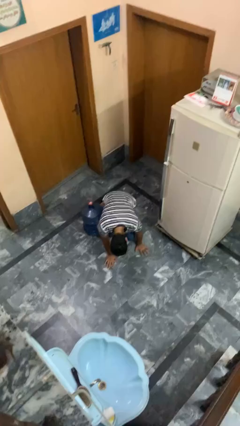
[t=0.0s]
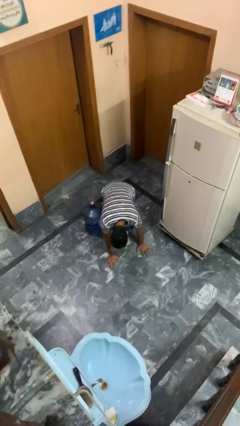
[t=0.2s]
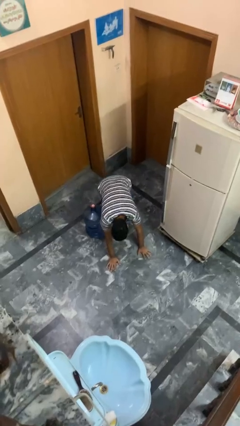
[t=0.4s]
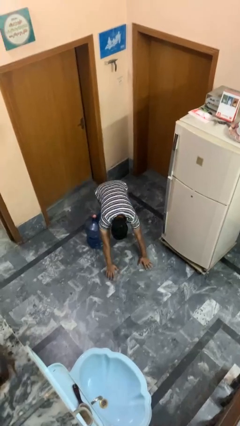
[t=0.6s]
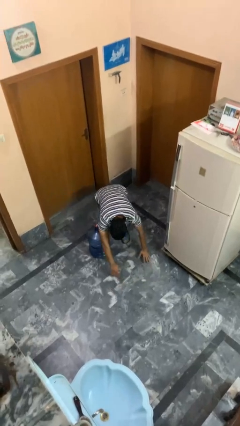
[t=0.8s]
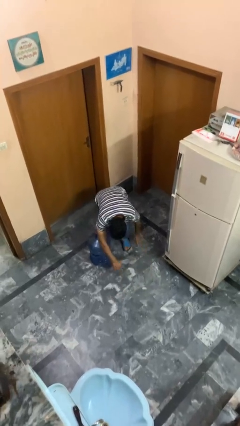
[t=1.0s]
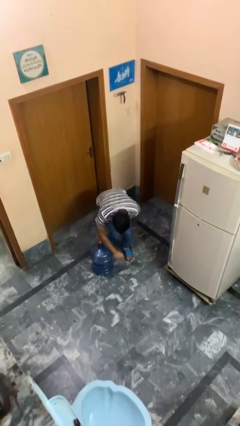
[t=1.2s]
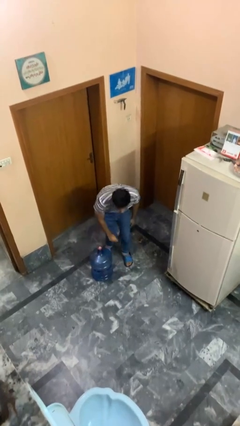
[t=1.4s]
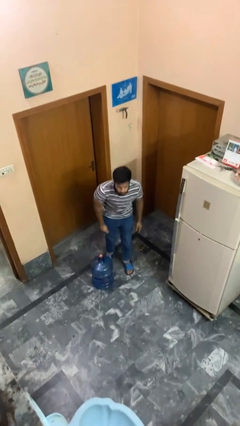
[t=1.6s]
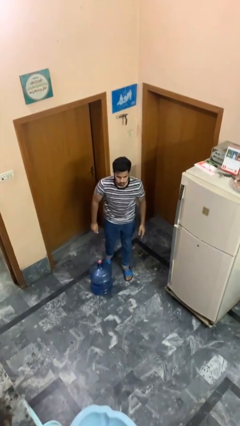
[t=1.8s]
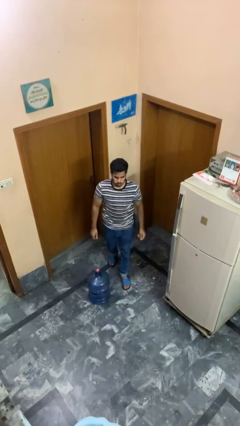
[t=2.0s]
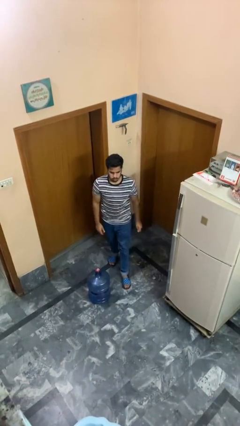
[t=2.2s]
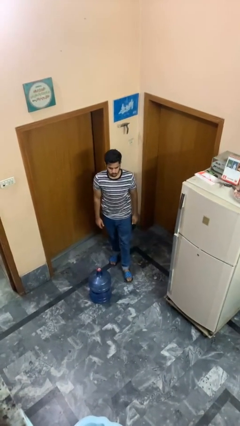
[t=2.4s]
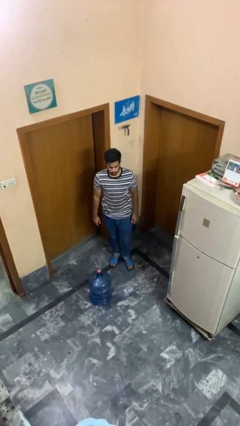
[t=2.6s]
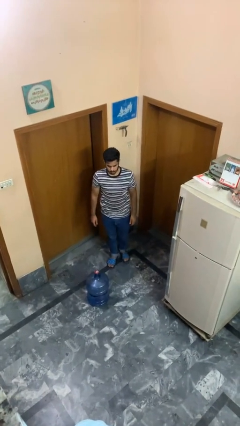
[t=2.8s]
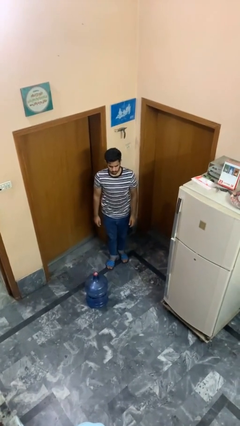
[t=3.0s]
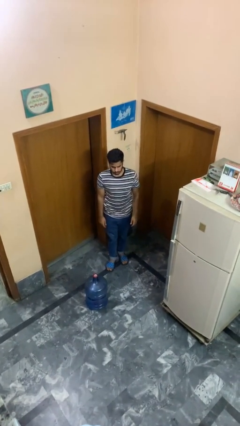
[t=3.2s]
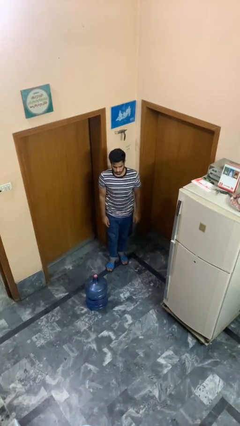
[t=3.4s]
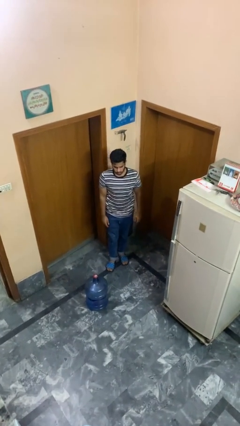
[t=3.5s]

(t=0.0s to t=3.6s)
person stands up from floor

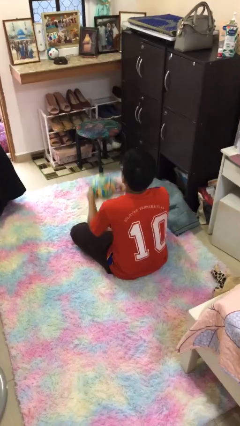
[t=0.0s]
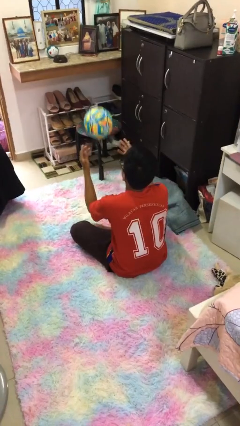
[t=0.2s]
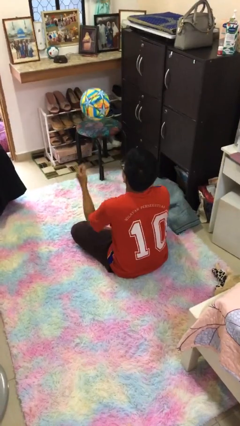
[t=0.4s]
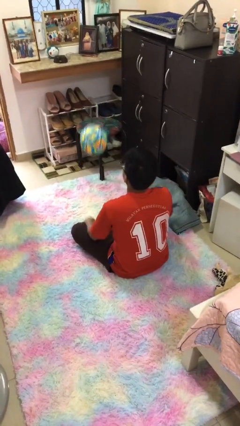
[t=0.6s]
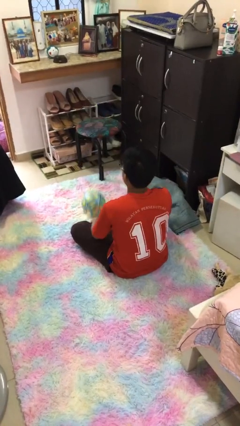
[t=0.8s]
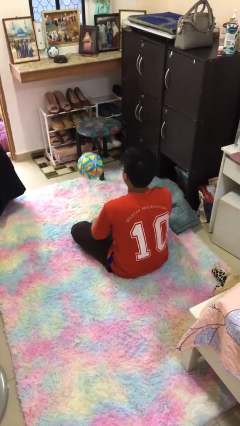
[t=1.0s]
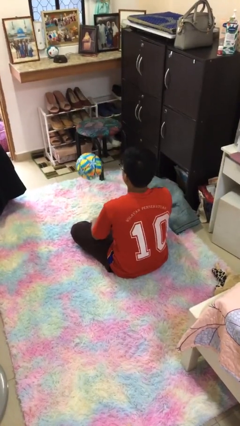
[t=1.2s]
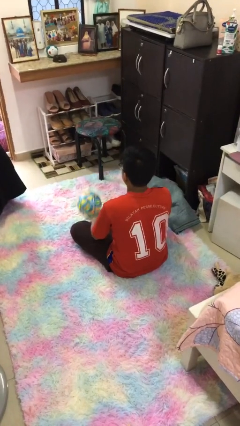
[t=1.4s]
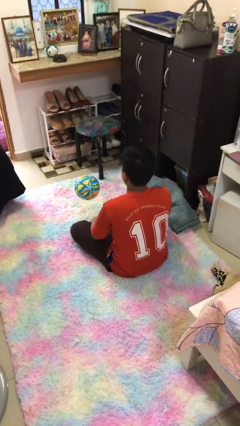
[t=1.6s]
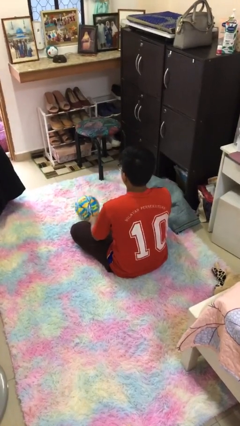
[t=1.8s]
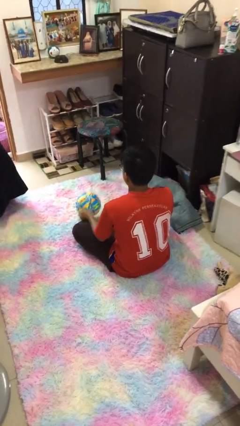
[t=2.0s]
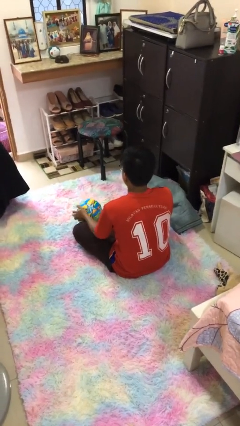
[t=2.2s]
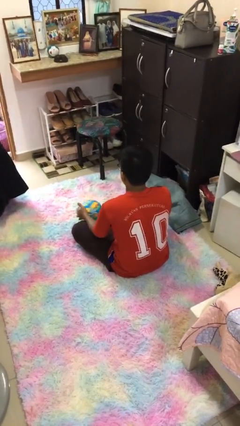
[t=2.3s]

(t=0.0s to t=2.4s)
person bounces ball on floor

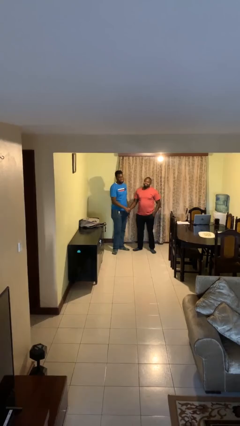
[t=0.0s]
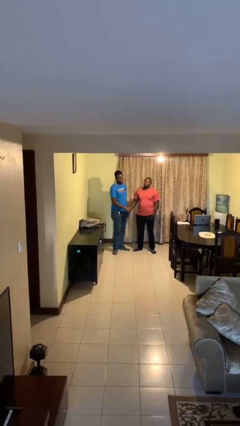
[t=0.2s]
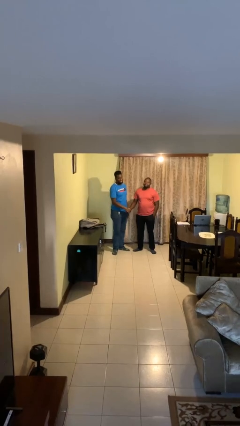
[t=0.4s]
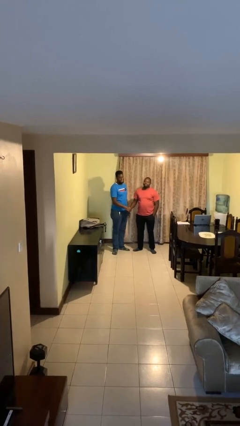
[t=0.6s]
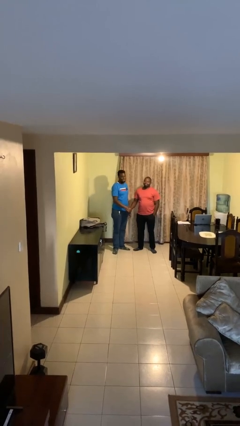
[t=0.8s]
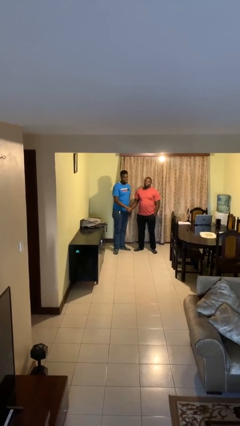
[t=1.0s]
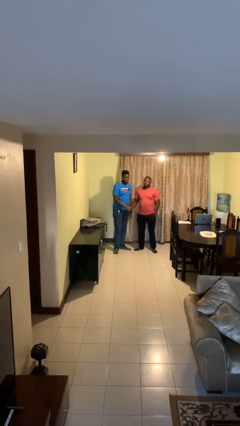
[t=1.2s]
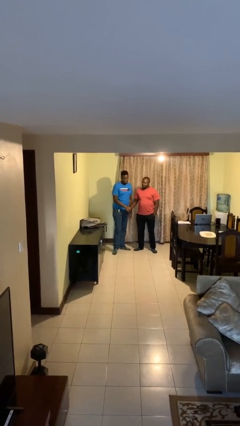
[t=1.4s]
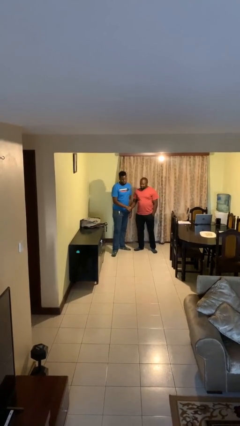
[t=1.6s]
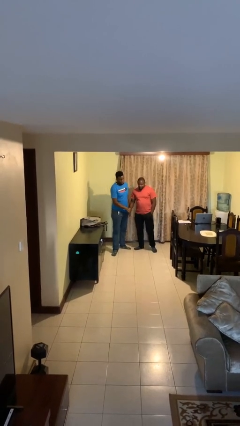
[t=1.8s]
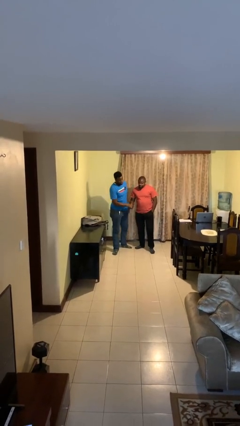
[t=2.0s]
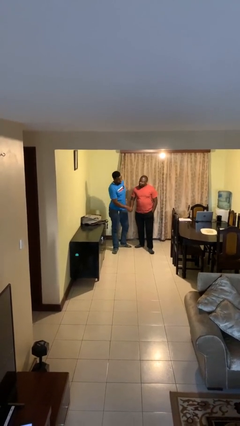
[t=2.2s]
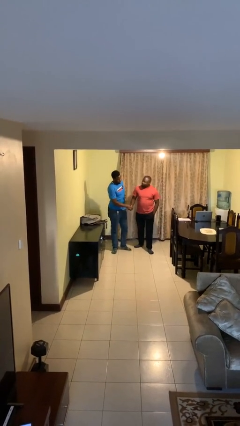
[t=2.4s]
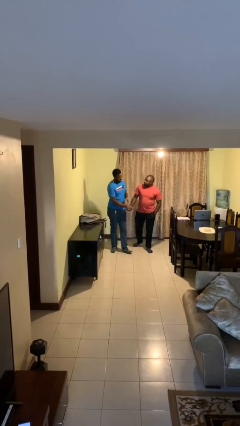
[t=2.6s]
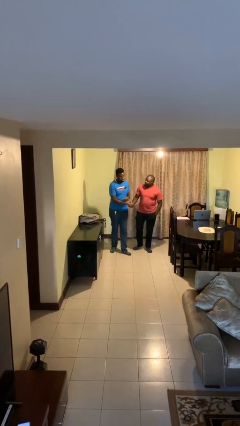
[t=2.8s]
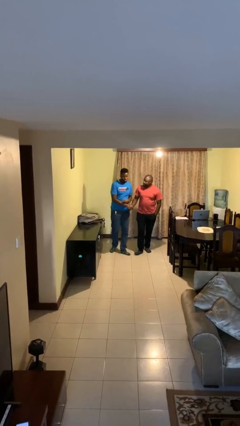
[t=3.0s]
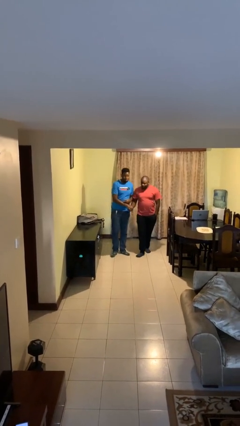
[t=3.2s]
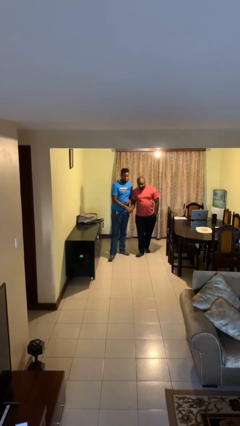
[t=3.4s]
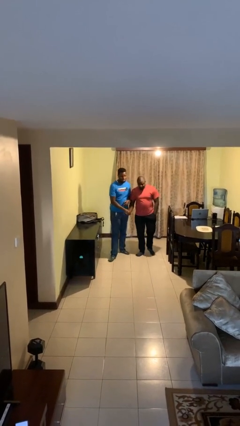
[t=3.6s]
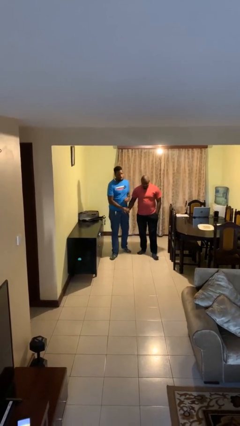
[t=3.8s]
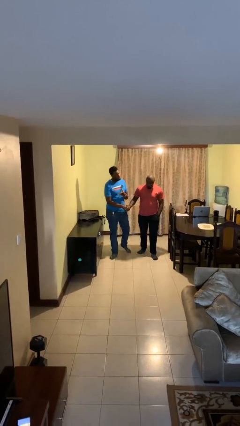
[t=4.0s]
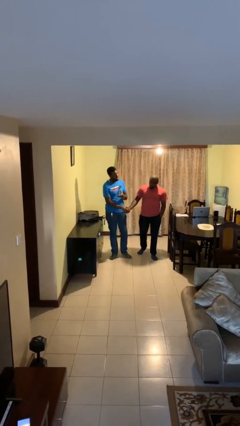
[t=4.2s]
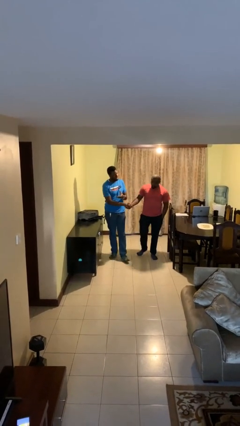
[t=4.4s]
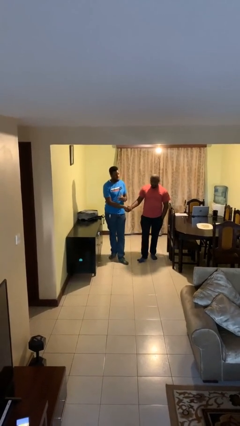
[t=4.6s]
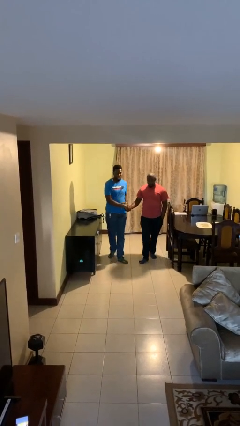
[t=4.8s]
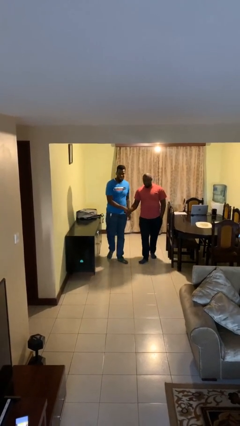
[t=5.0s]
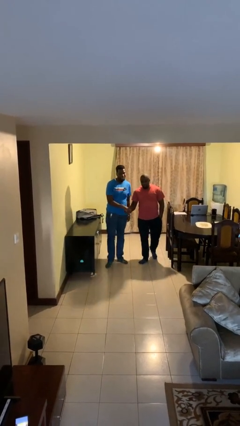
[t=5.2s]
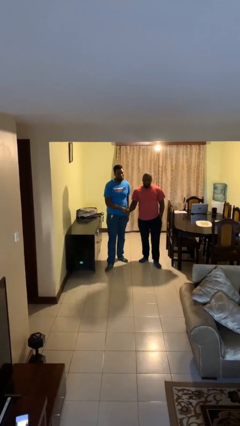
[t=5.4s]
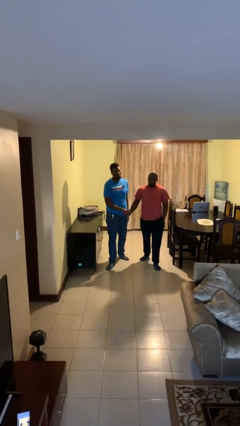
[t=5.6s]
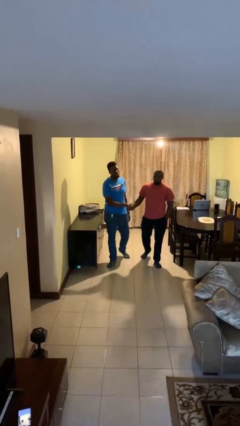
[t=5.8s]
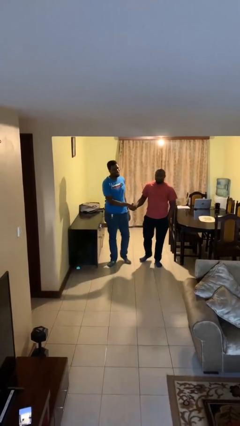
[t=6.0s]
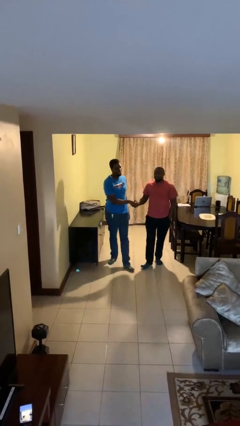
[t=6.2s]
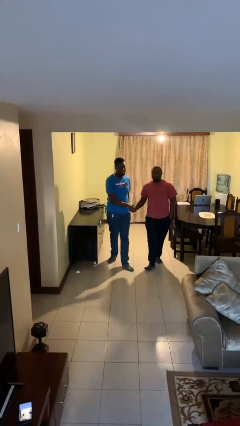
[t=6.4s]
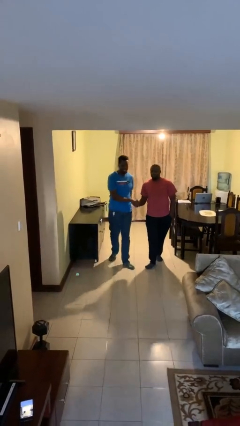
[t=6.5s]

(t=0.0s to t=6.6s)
person holds hand

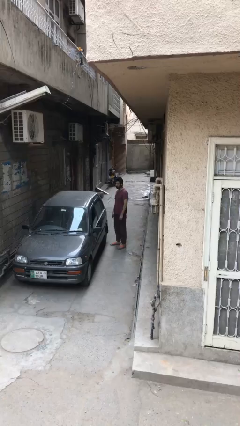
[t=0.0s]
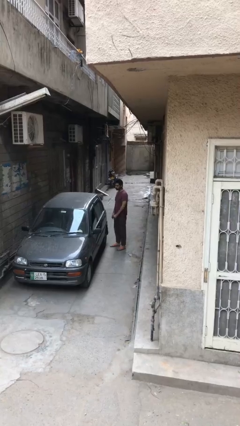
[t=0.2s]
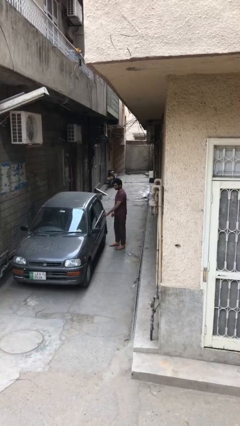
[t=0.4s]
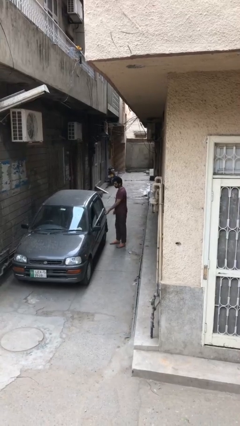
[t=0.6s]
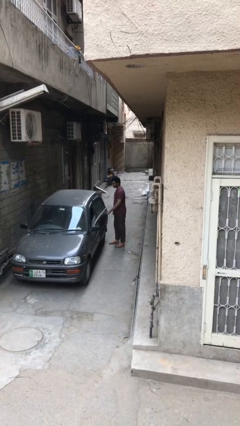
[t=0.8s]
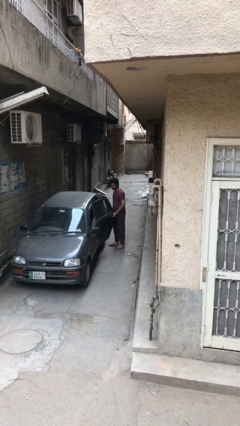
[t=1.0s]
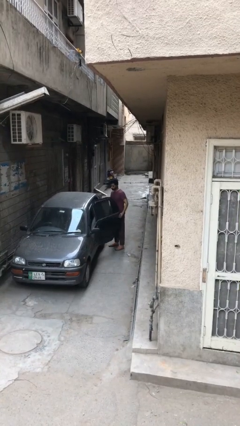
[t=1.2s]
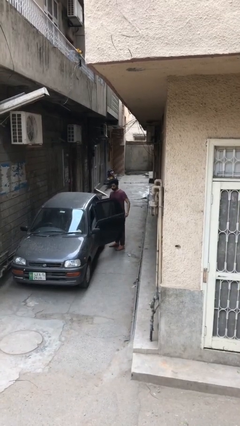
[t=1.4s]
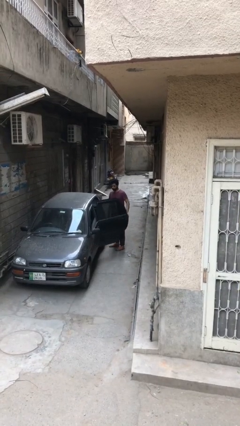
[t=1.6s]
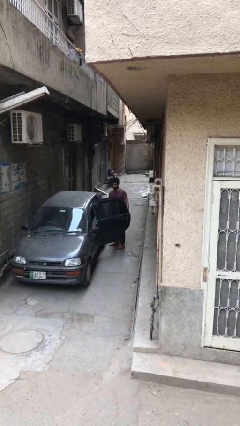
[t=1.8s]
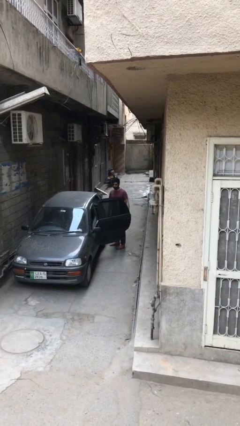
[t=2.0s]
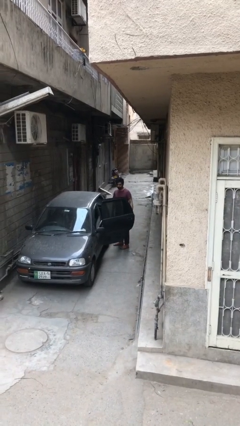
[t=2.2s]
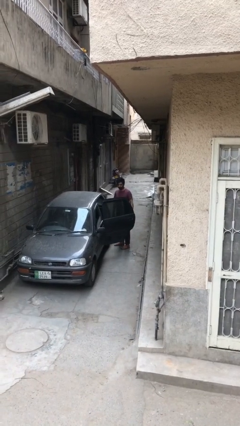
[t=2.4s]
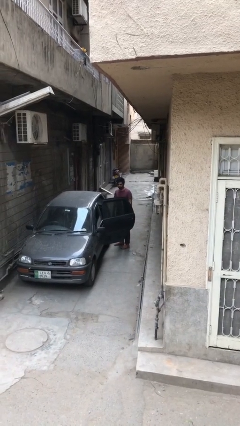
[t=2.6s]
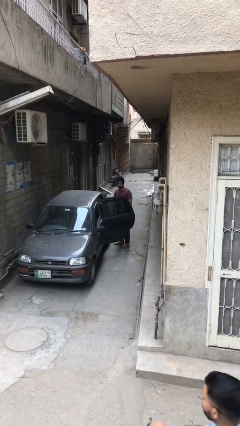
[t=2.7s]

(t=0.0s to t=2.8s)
person opens car door

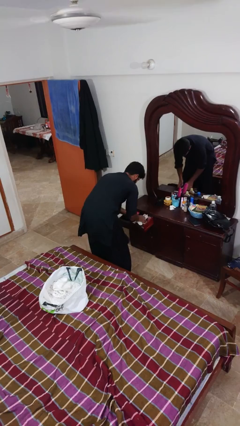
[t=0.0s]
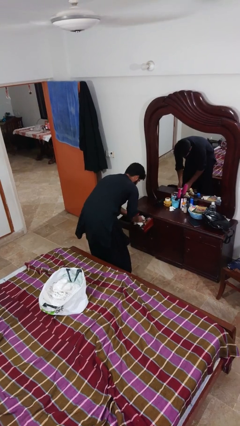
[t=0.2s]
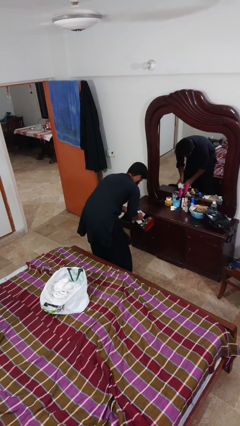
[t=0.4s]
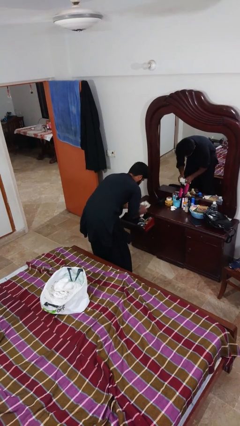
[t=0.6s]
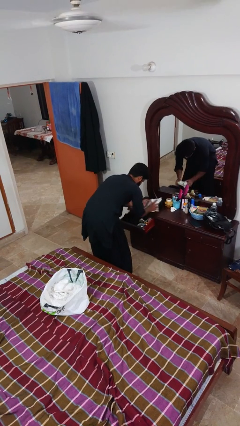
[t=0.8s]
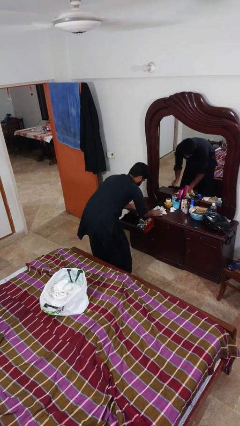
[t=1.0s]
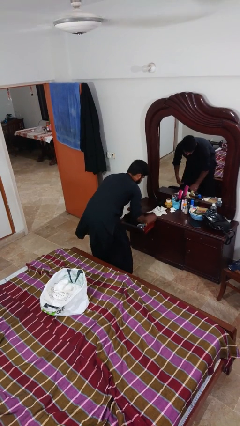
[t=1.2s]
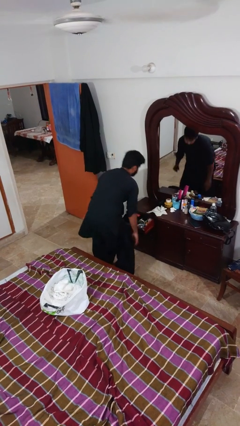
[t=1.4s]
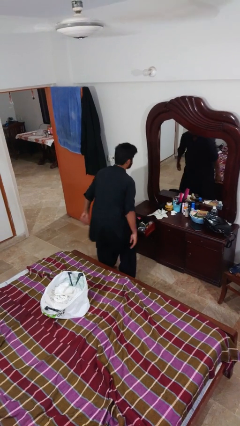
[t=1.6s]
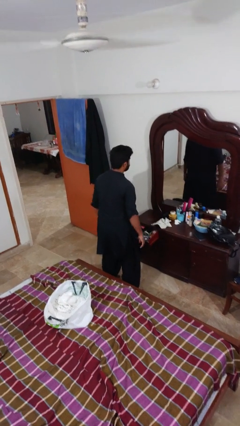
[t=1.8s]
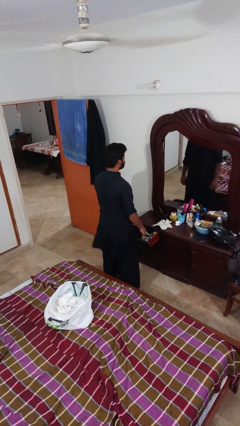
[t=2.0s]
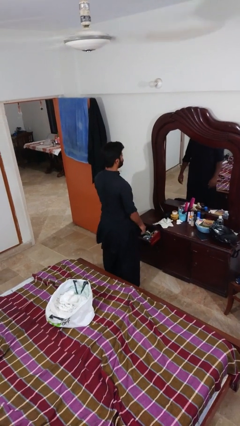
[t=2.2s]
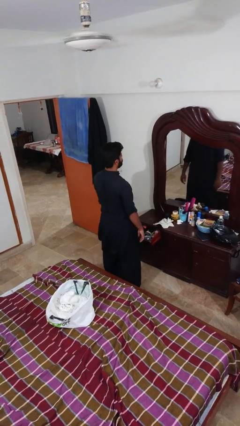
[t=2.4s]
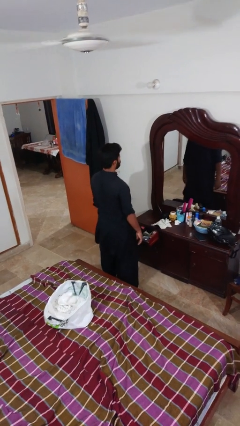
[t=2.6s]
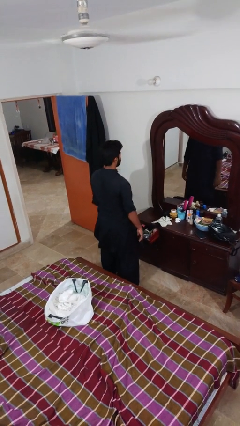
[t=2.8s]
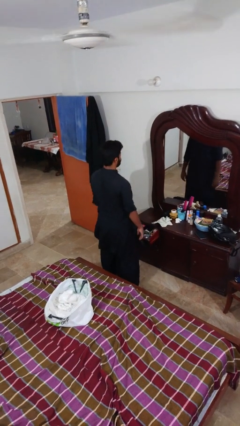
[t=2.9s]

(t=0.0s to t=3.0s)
person takes clothes from dresser
